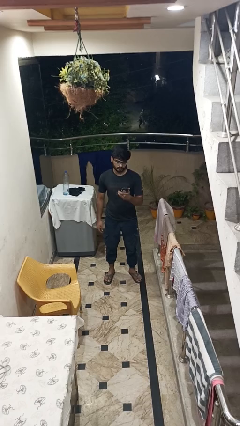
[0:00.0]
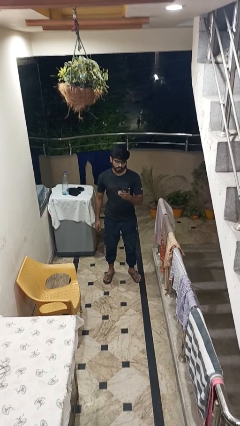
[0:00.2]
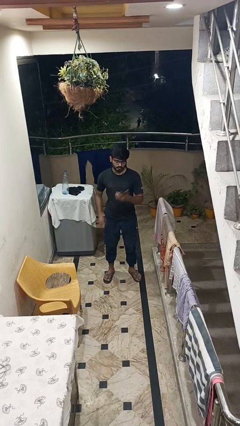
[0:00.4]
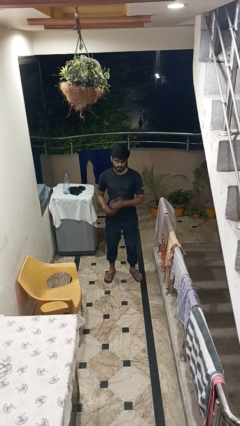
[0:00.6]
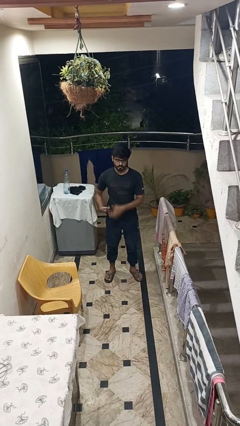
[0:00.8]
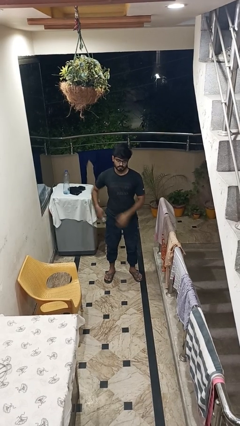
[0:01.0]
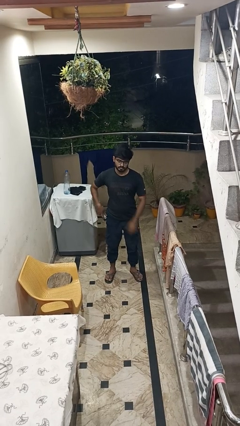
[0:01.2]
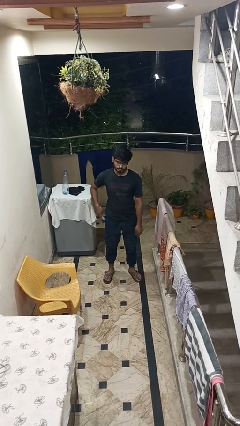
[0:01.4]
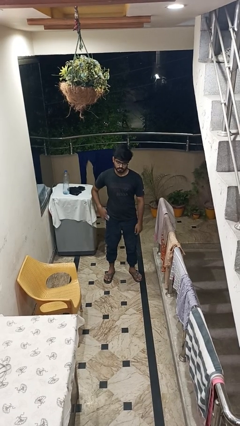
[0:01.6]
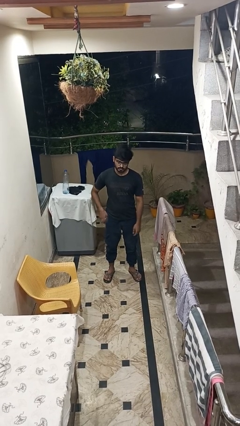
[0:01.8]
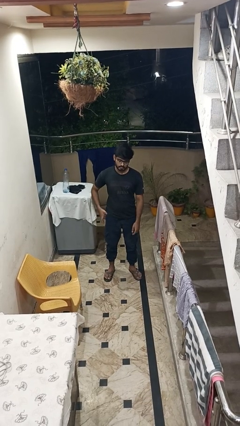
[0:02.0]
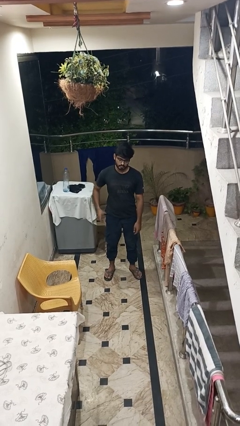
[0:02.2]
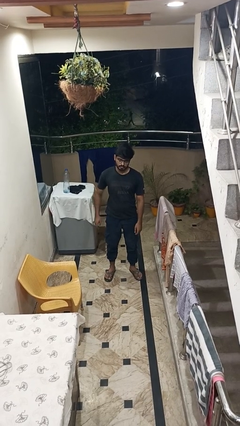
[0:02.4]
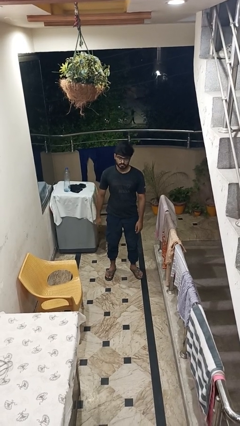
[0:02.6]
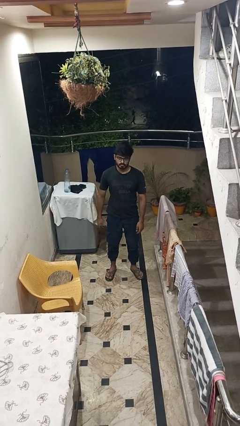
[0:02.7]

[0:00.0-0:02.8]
person puts phone into pocket

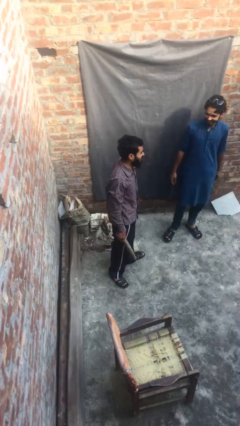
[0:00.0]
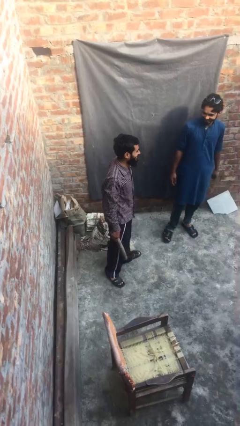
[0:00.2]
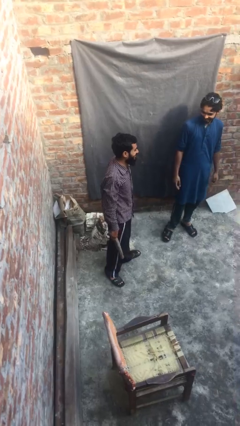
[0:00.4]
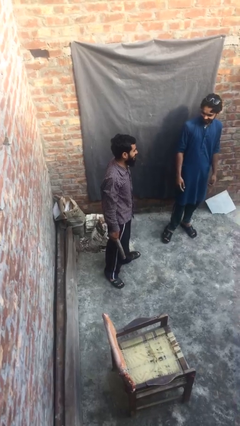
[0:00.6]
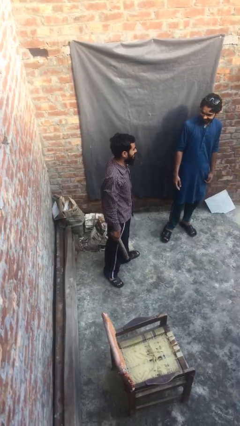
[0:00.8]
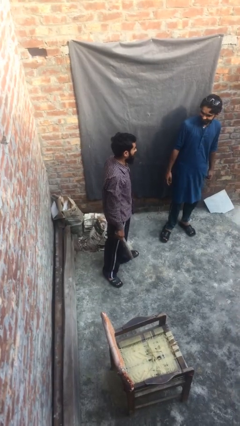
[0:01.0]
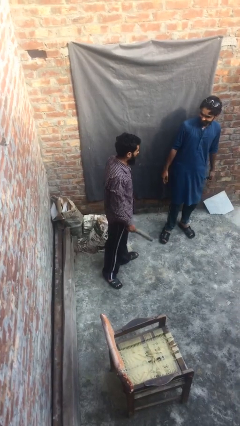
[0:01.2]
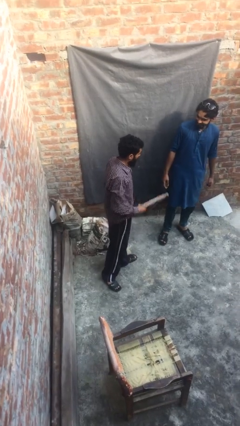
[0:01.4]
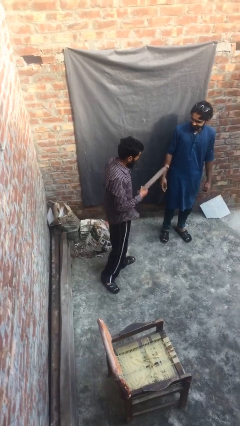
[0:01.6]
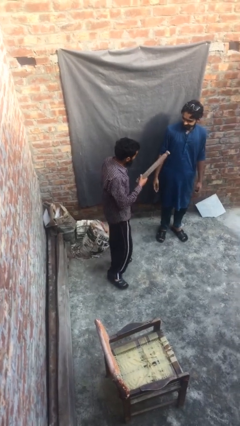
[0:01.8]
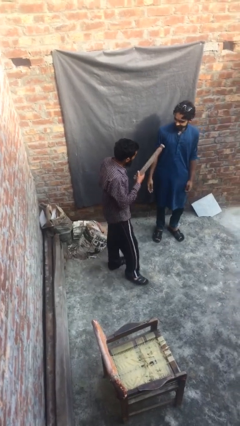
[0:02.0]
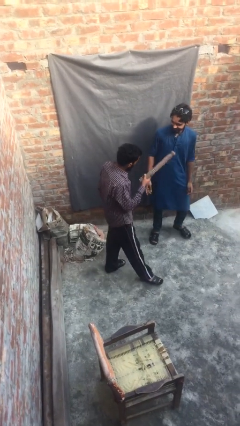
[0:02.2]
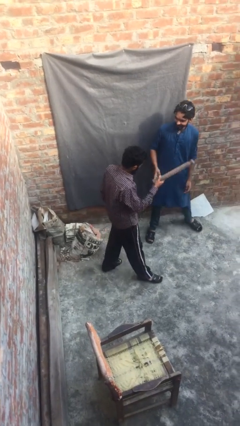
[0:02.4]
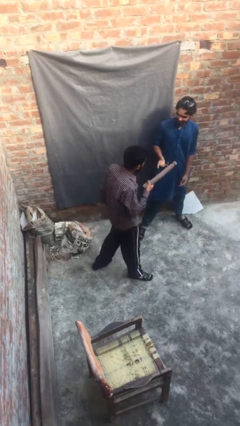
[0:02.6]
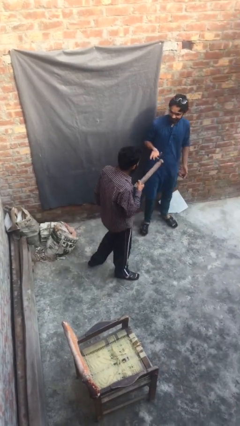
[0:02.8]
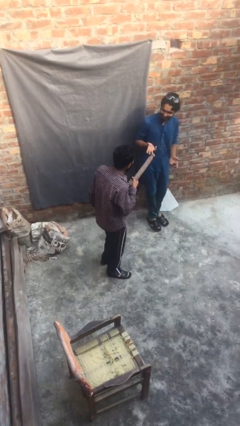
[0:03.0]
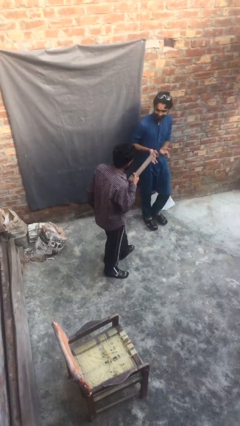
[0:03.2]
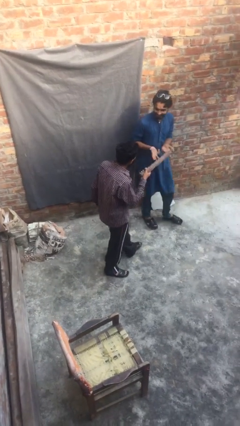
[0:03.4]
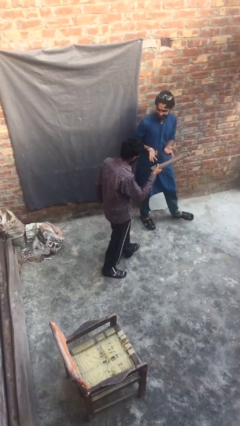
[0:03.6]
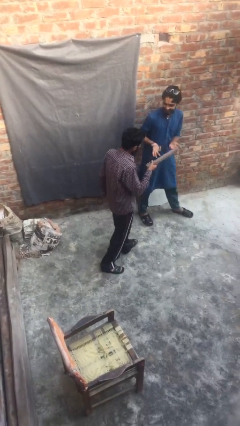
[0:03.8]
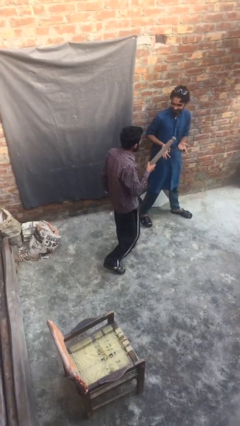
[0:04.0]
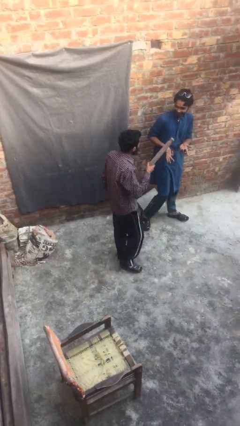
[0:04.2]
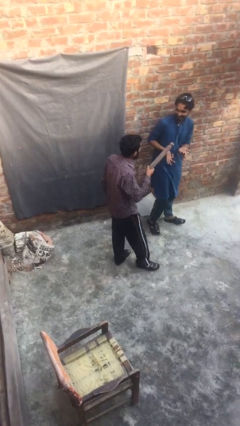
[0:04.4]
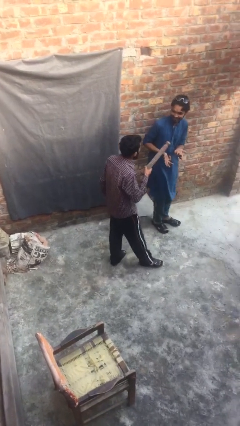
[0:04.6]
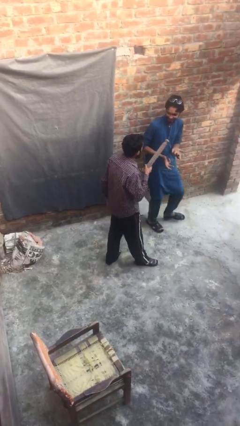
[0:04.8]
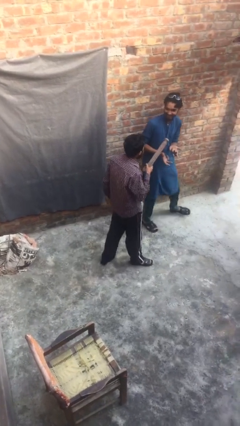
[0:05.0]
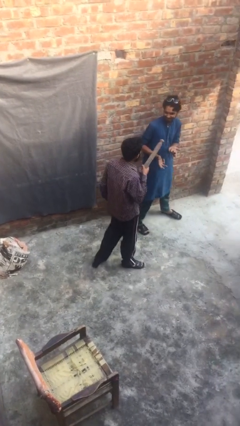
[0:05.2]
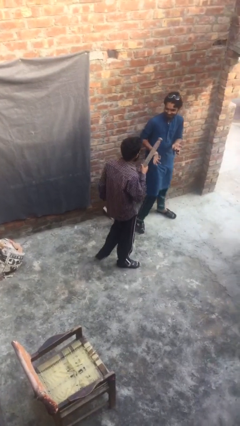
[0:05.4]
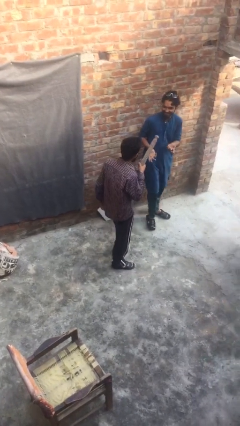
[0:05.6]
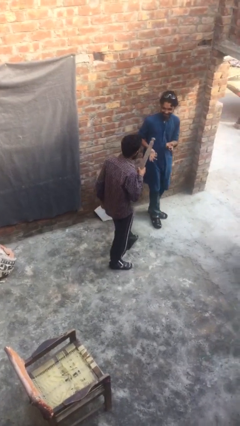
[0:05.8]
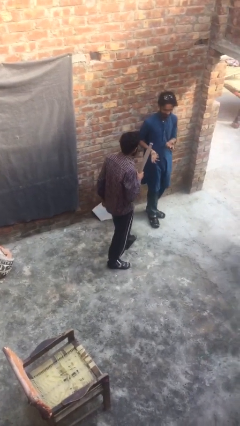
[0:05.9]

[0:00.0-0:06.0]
person talks to person

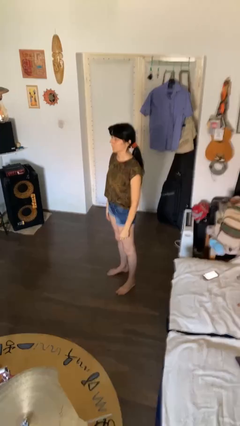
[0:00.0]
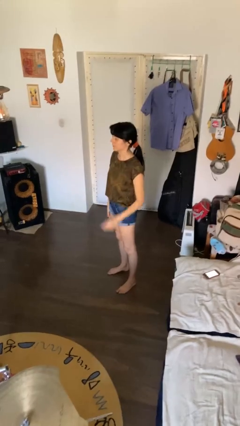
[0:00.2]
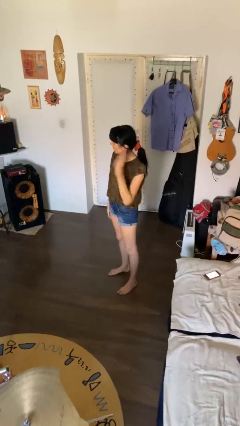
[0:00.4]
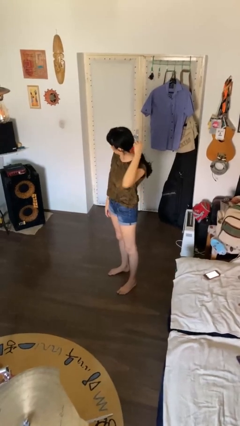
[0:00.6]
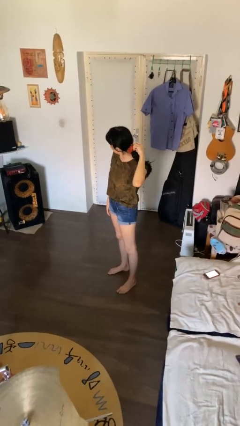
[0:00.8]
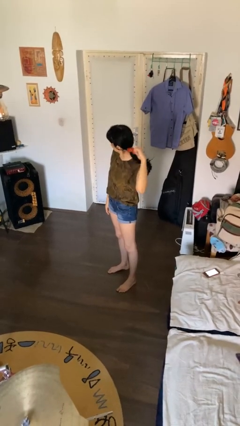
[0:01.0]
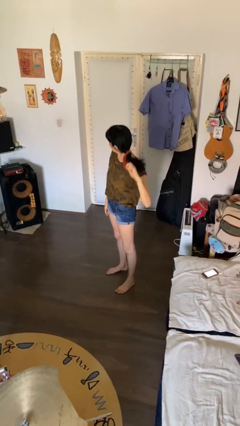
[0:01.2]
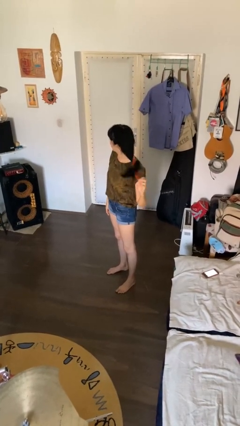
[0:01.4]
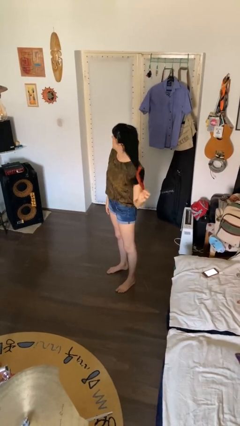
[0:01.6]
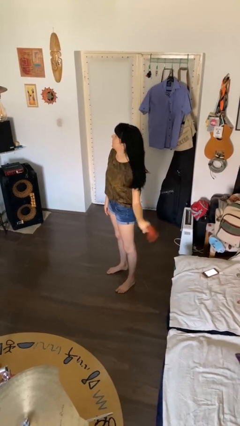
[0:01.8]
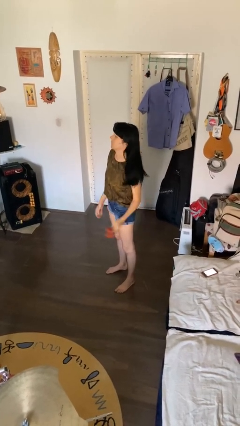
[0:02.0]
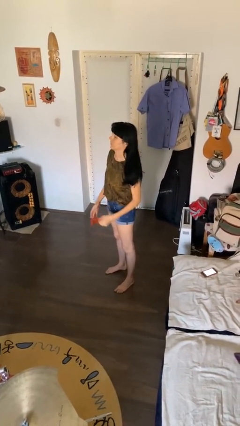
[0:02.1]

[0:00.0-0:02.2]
person takes off hairtie

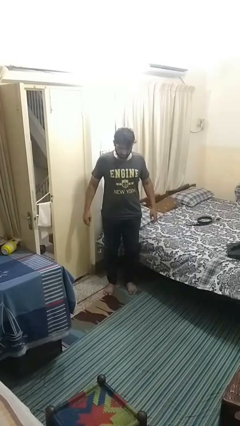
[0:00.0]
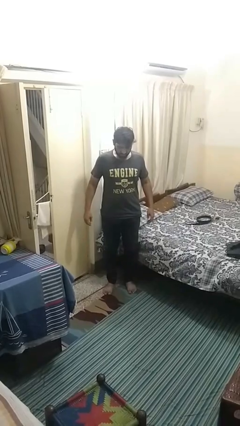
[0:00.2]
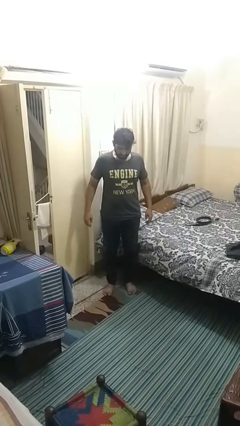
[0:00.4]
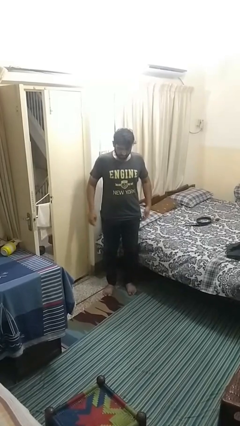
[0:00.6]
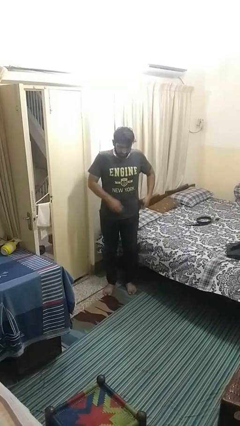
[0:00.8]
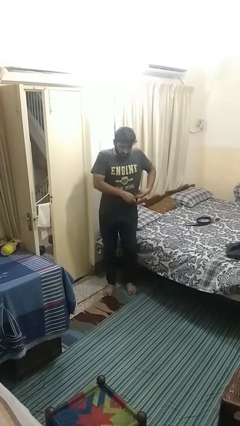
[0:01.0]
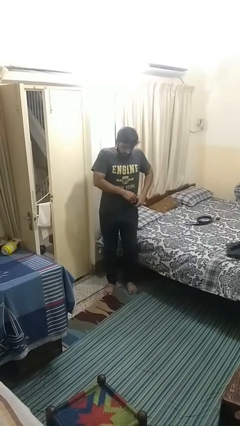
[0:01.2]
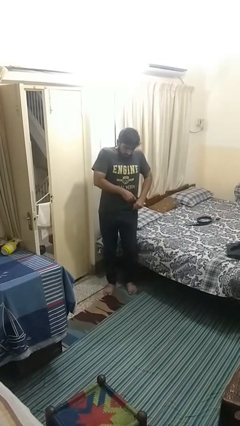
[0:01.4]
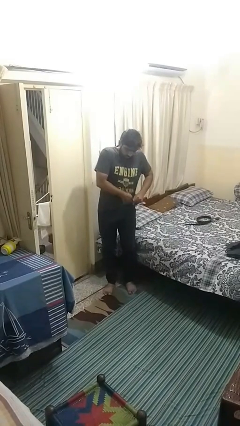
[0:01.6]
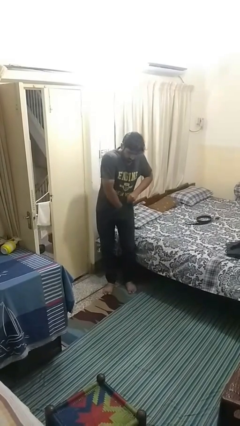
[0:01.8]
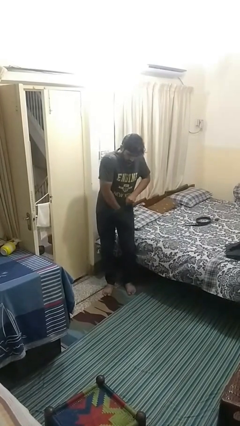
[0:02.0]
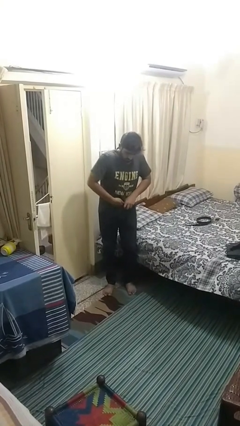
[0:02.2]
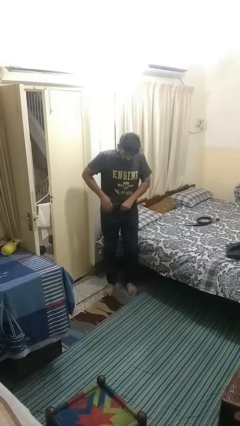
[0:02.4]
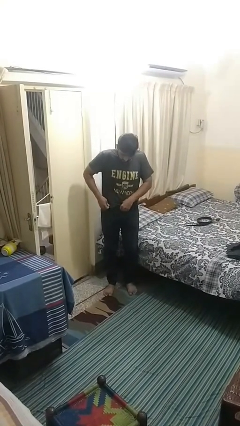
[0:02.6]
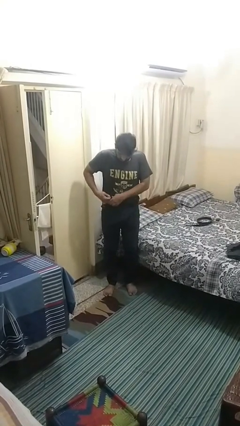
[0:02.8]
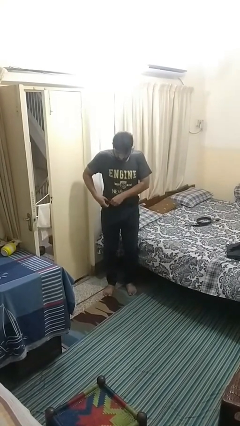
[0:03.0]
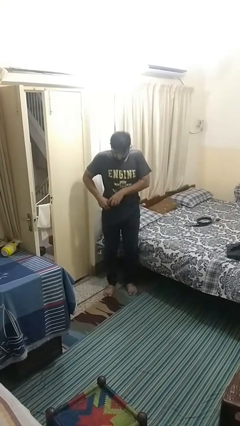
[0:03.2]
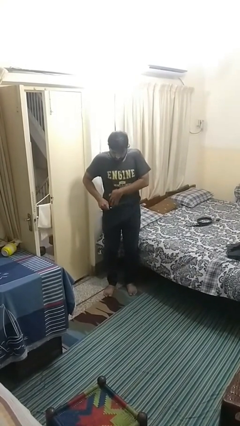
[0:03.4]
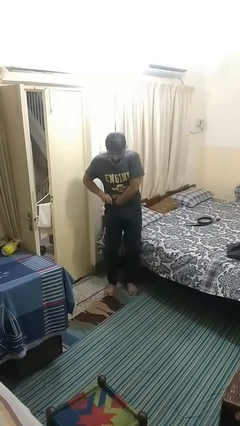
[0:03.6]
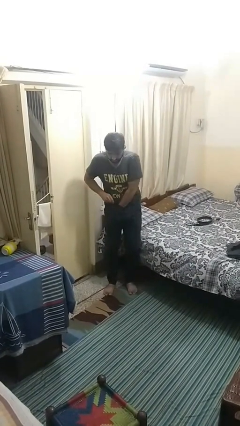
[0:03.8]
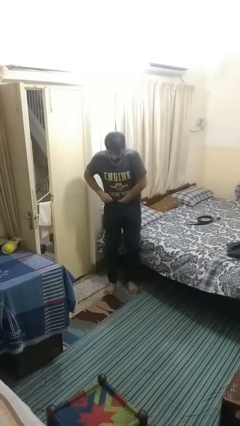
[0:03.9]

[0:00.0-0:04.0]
person tucks in shirt

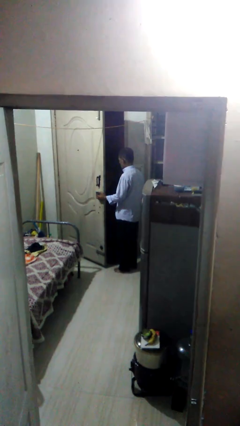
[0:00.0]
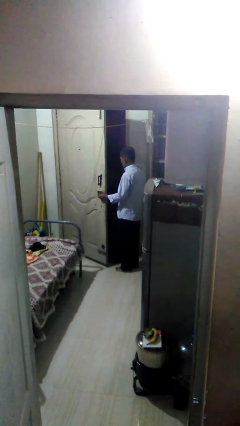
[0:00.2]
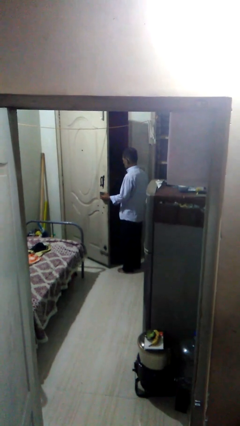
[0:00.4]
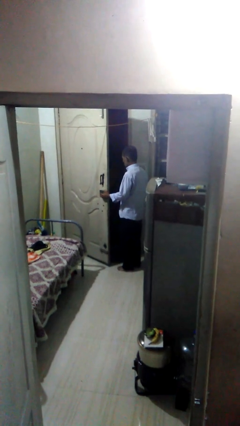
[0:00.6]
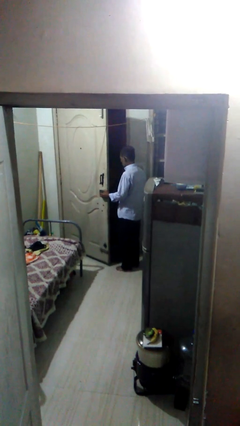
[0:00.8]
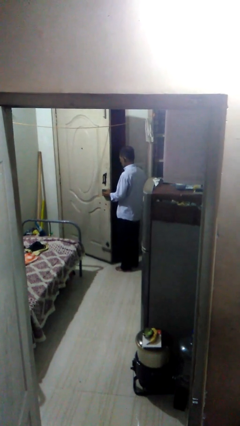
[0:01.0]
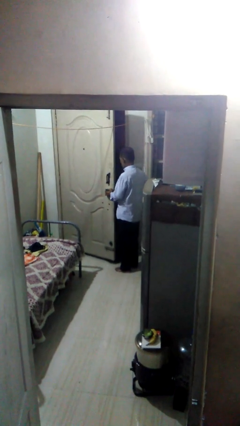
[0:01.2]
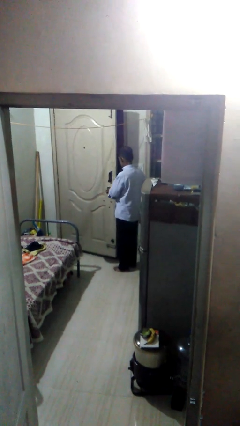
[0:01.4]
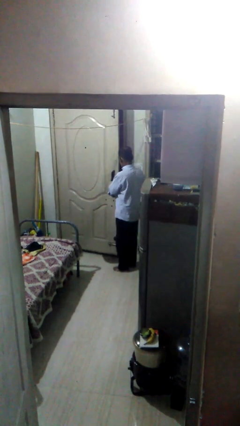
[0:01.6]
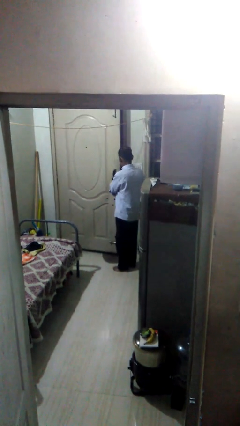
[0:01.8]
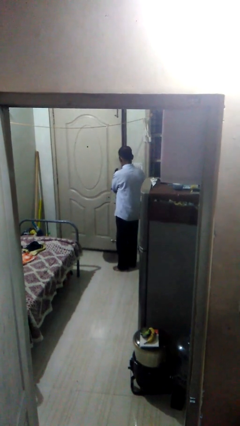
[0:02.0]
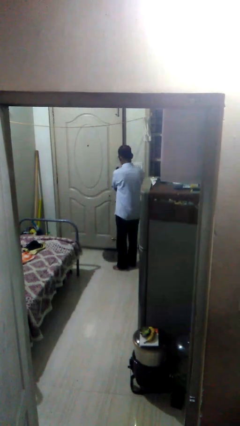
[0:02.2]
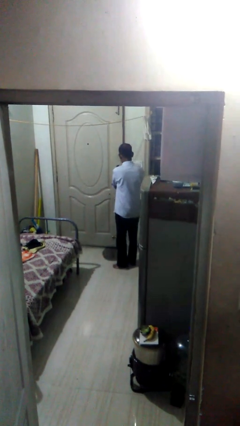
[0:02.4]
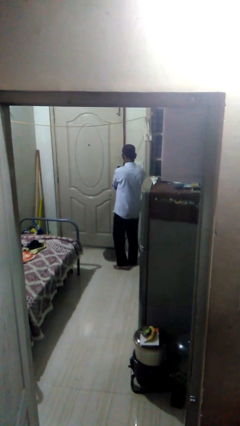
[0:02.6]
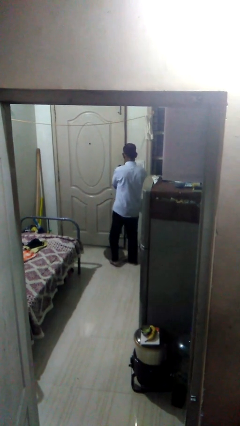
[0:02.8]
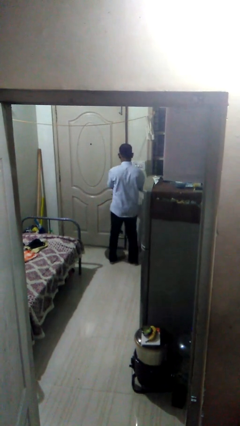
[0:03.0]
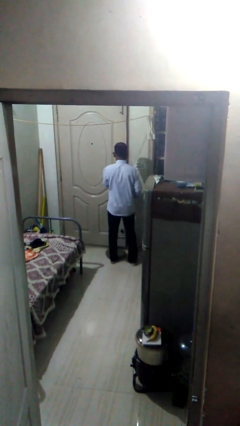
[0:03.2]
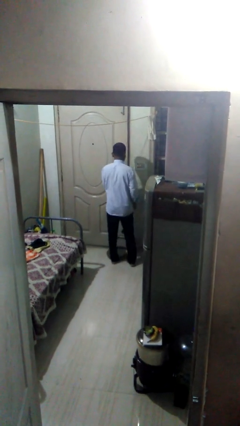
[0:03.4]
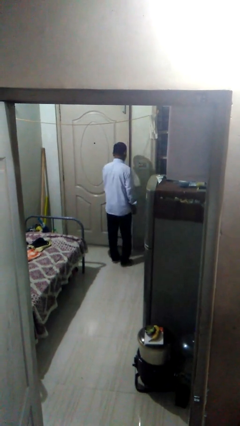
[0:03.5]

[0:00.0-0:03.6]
person closes facility door
